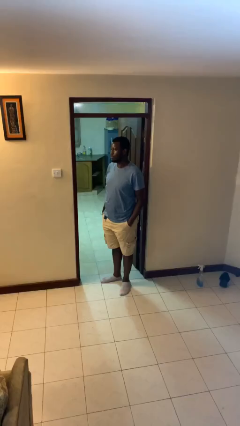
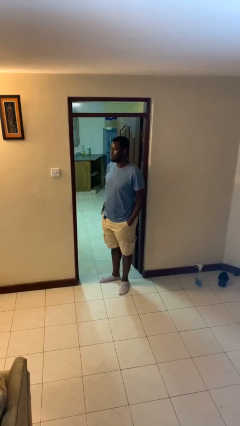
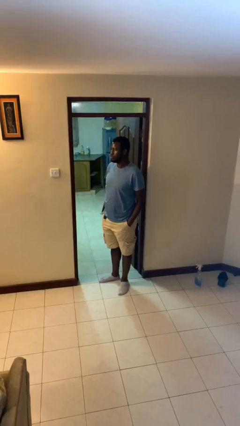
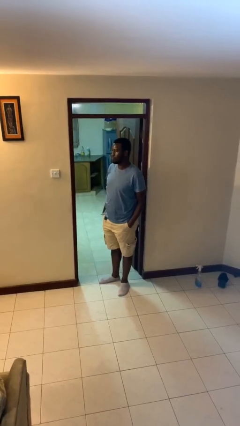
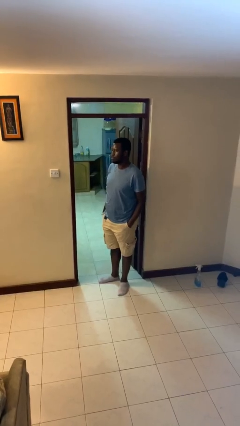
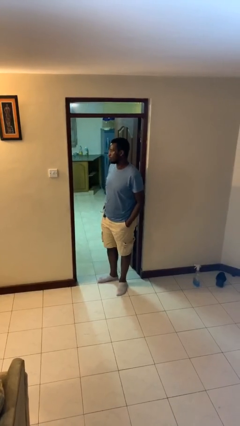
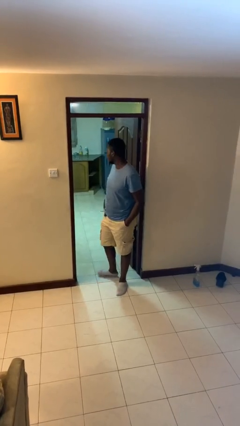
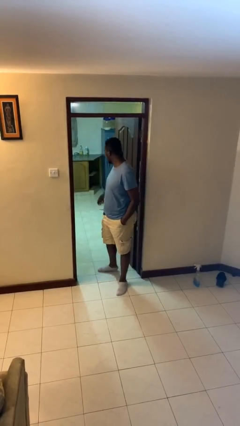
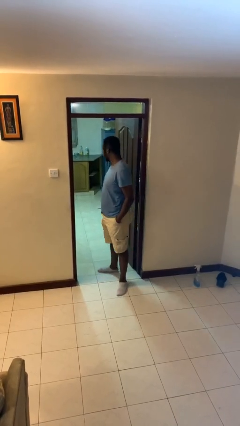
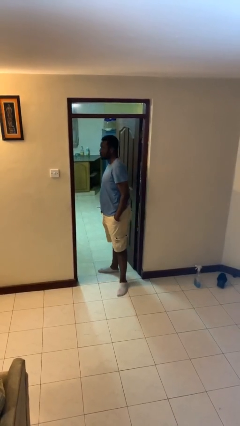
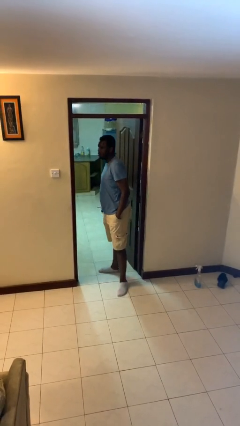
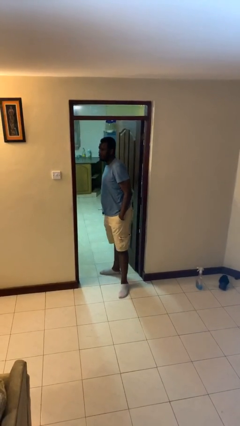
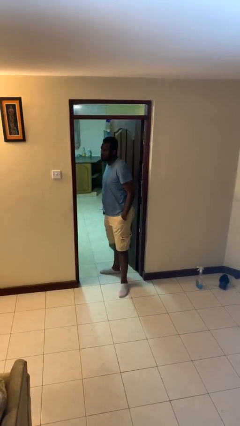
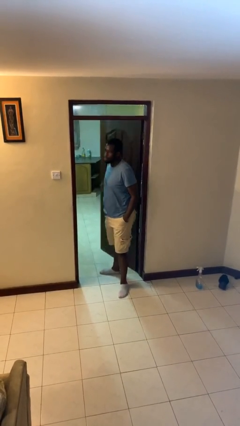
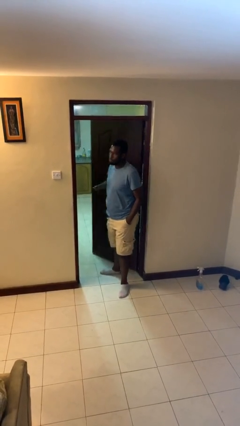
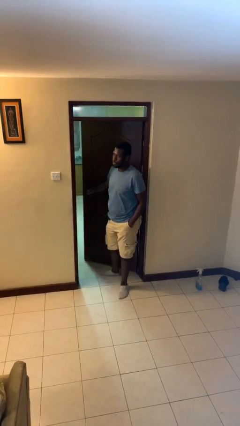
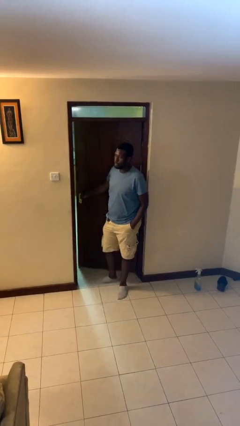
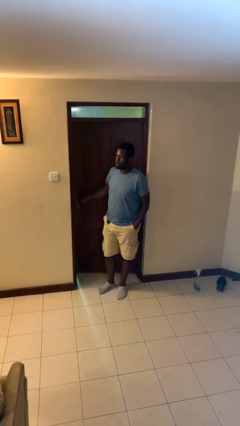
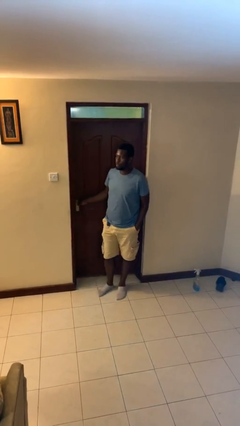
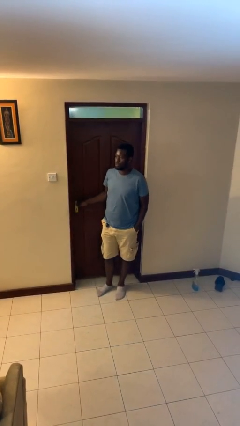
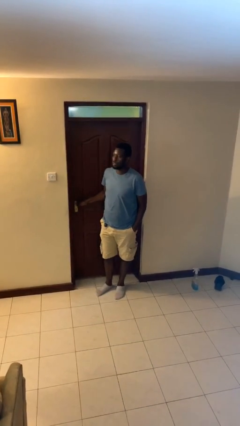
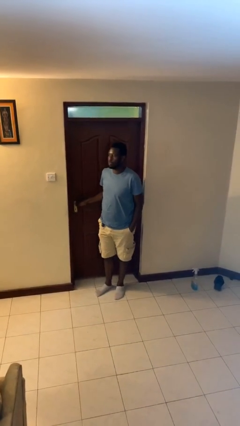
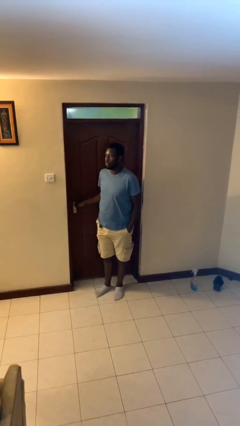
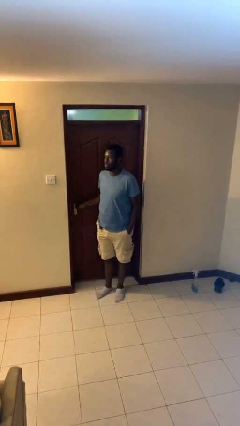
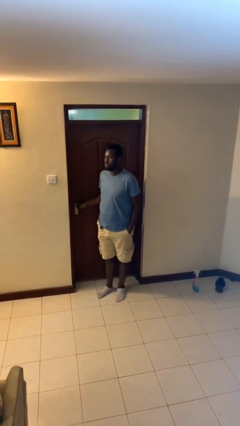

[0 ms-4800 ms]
person closes facility door

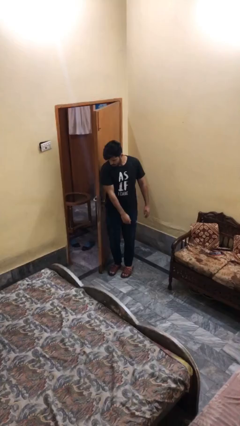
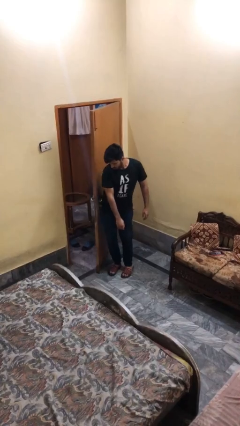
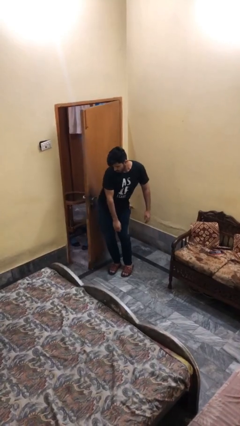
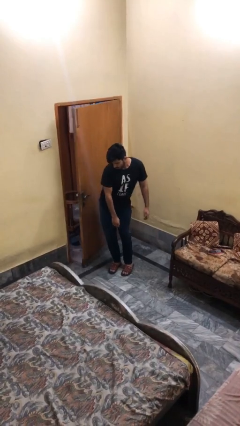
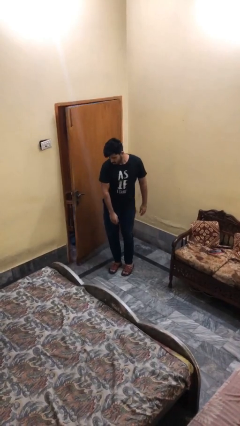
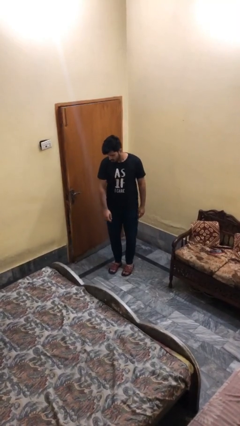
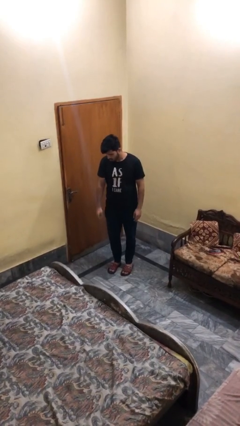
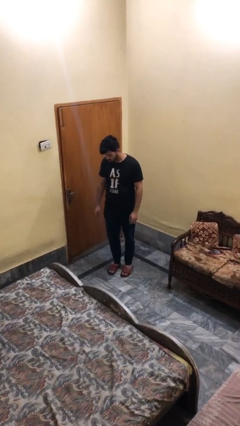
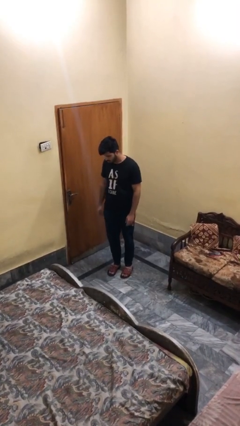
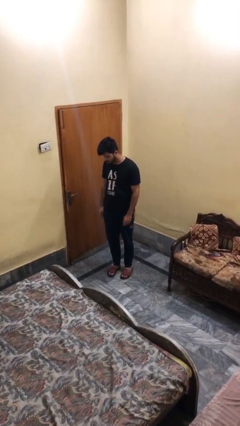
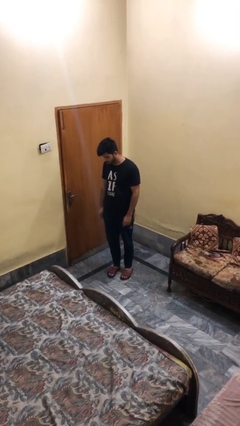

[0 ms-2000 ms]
person closes door with hip

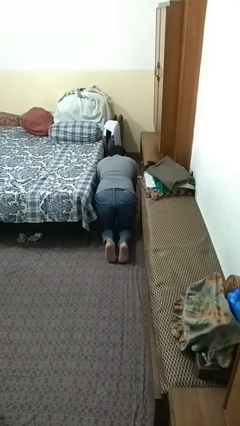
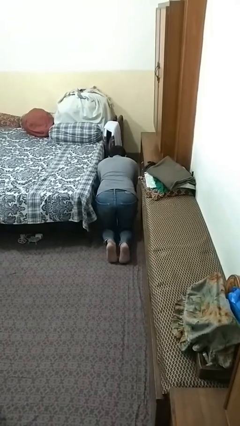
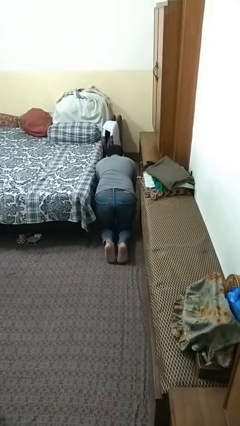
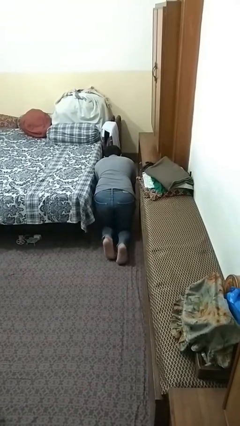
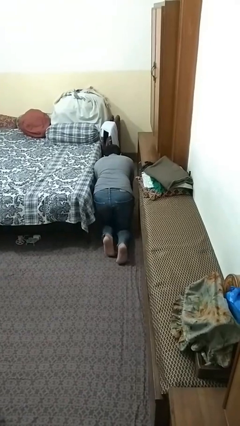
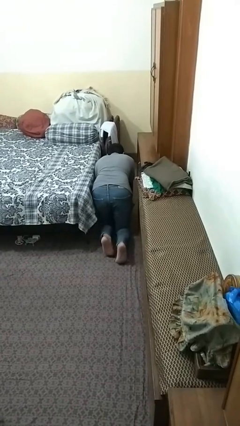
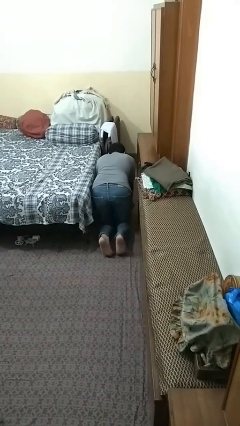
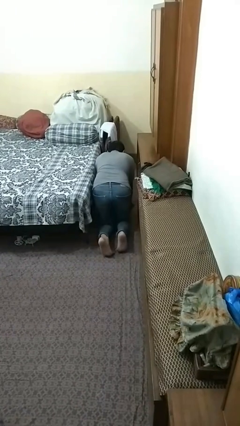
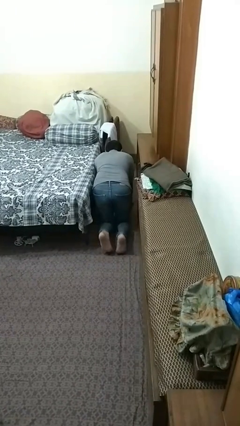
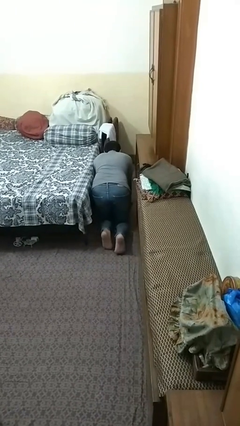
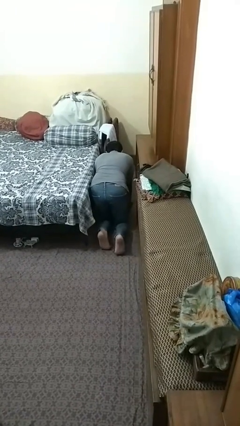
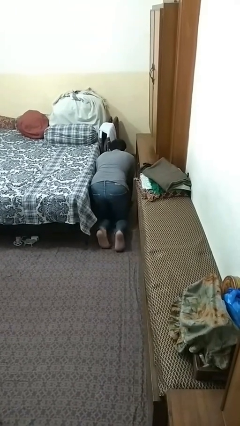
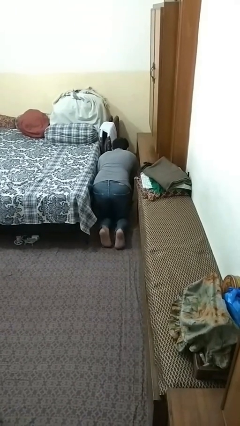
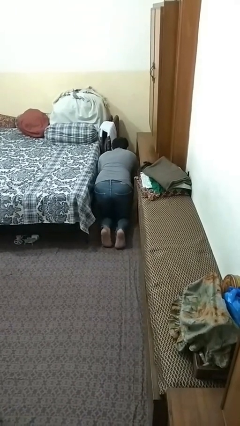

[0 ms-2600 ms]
person crawls

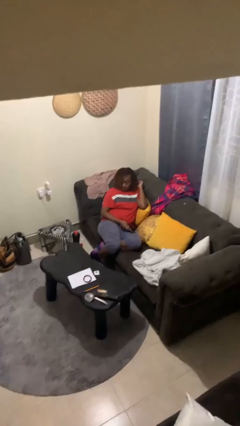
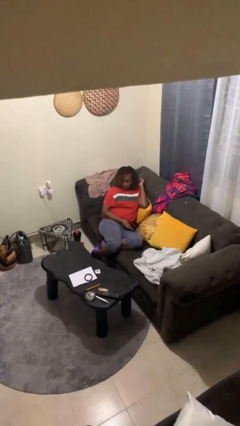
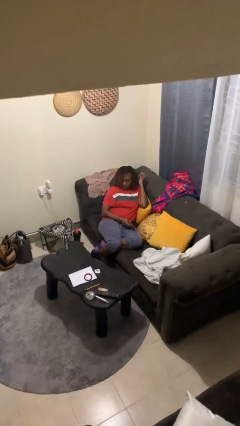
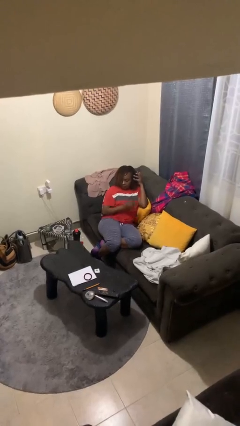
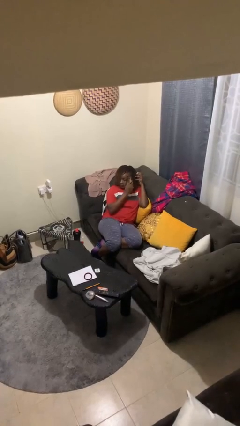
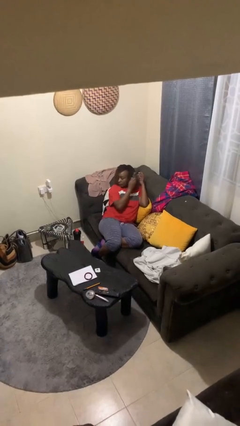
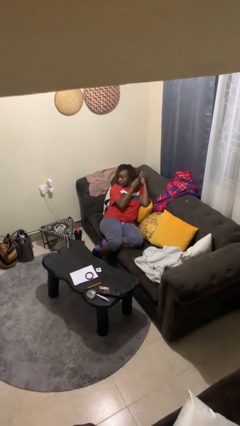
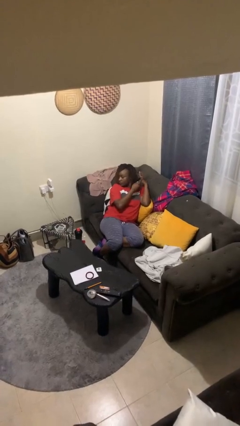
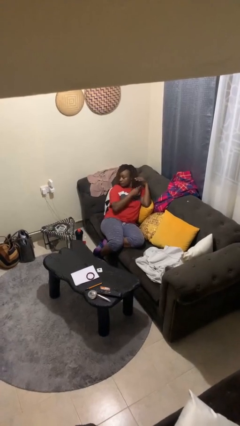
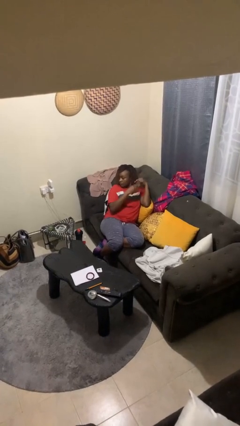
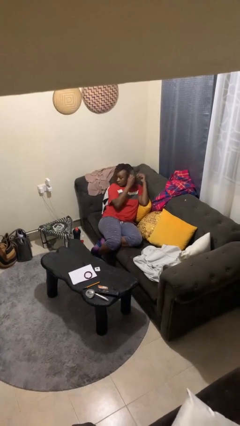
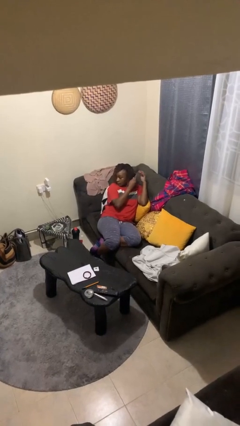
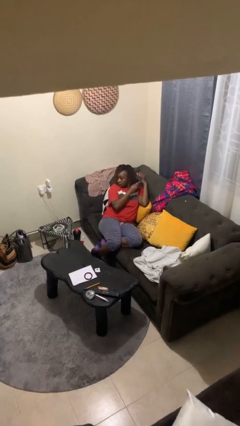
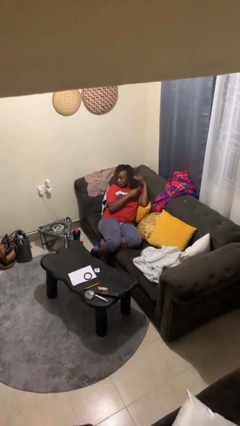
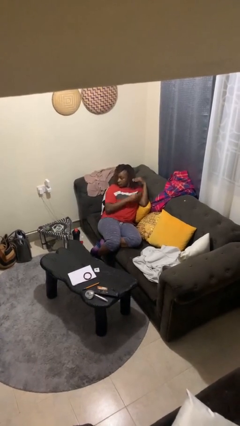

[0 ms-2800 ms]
person brushes hair

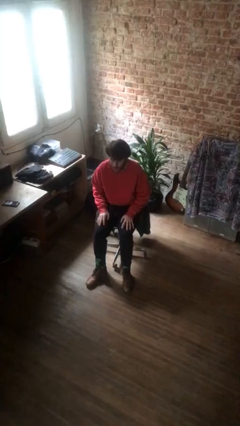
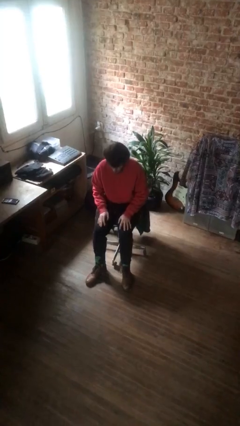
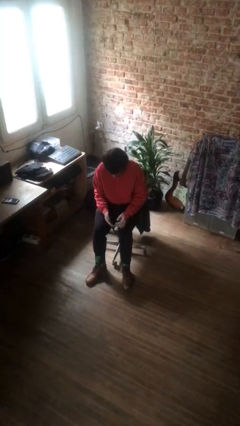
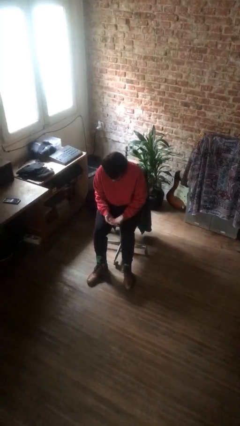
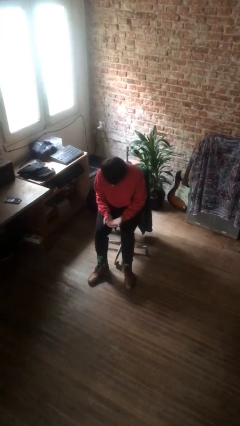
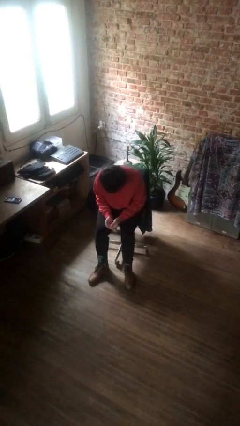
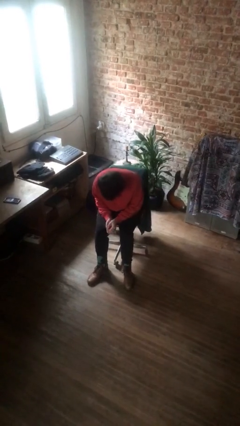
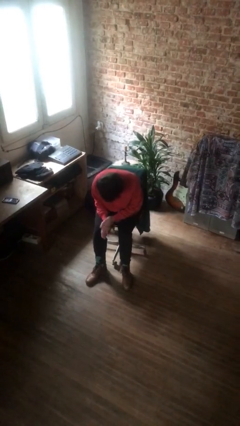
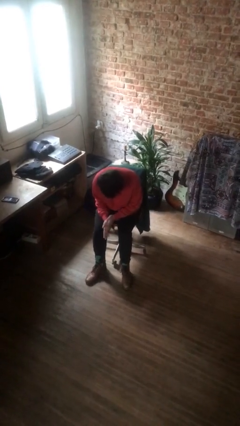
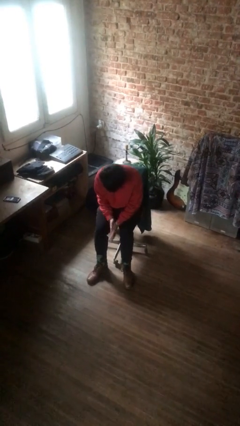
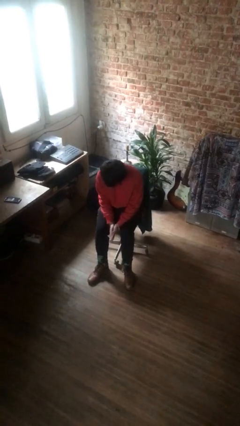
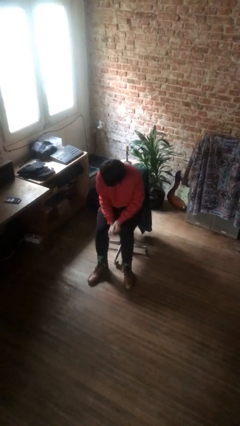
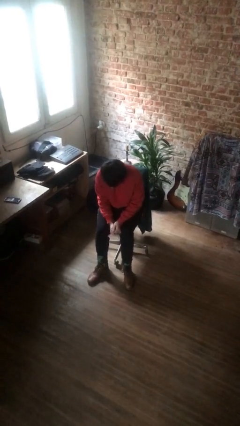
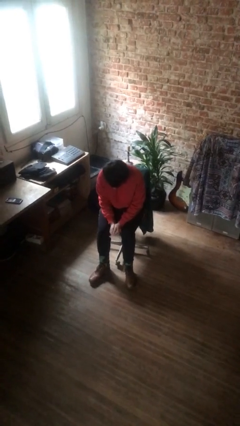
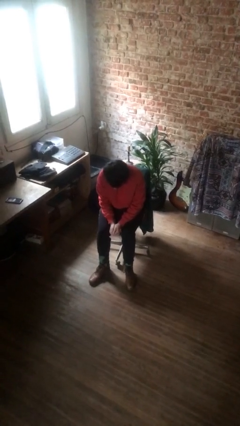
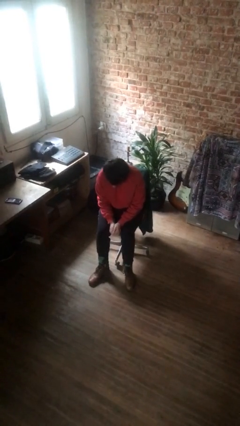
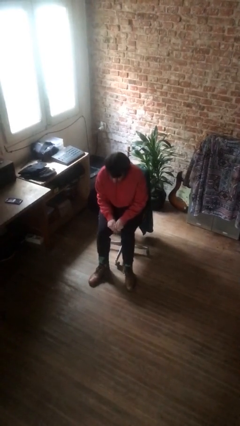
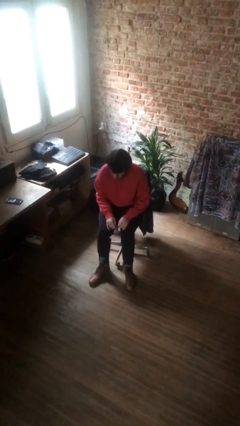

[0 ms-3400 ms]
person looks at hands in lap

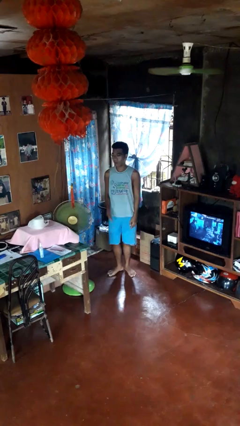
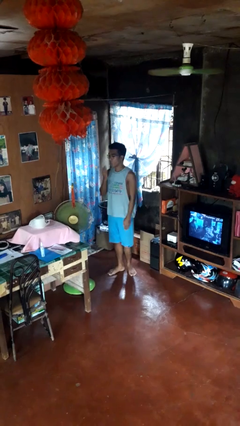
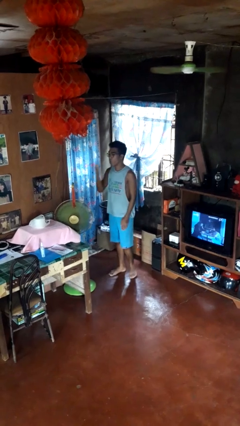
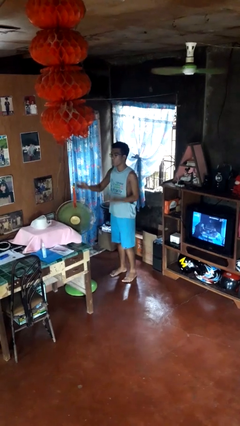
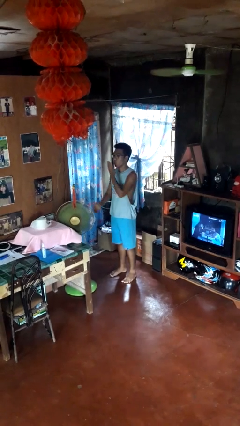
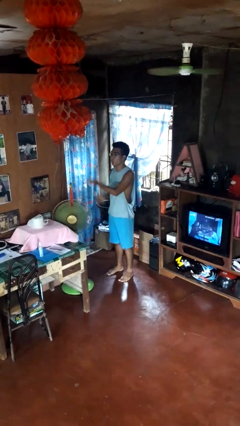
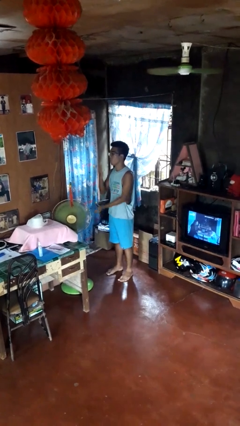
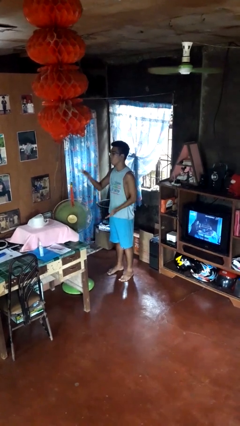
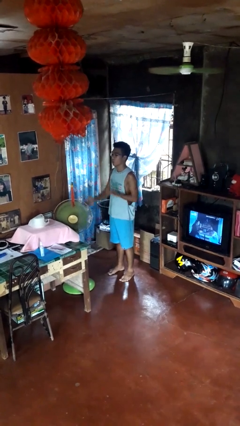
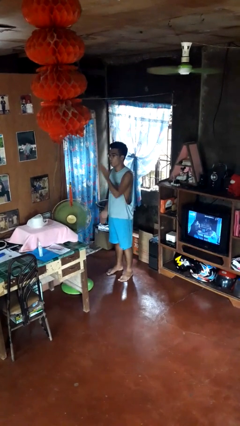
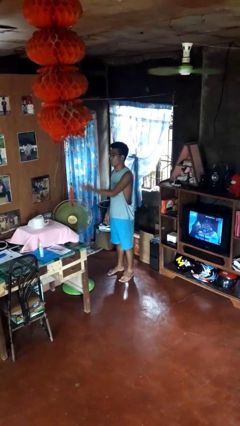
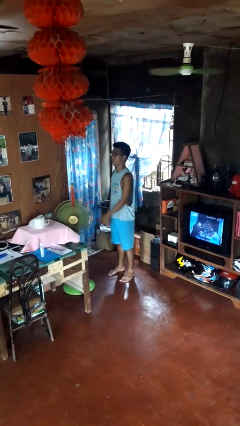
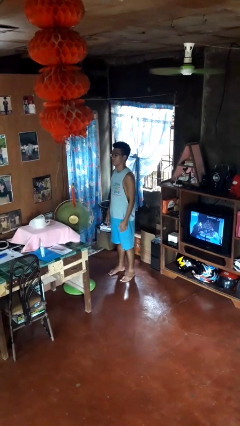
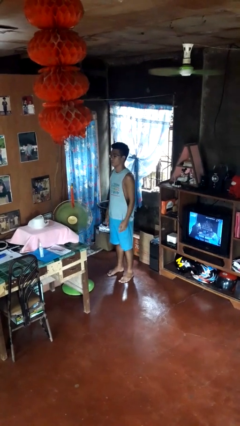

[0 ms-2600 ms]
person gestures blow kiss
